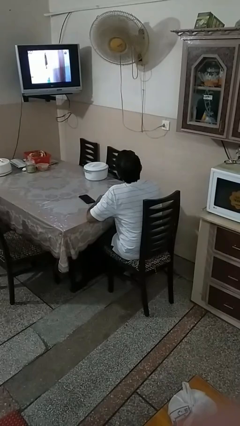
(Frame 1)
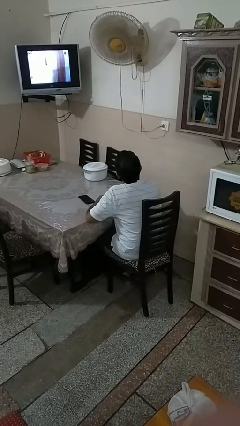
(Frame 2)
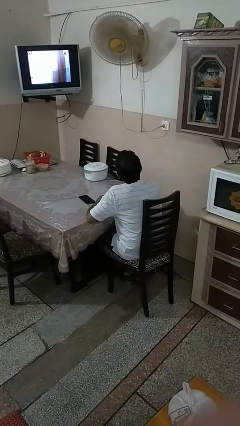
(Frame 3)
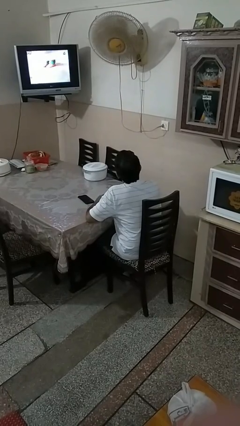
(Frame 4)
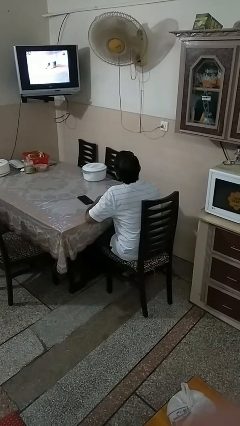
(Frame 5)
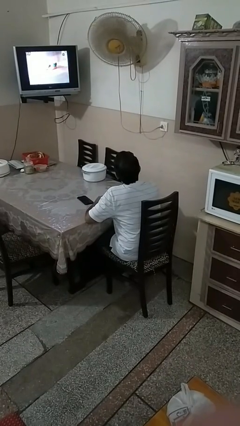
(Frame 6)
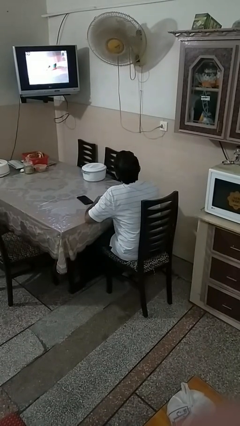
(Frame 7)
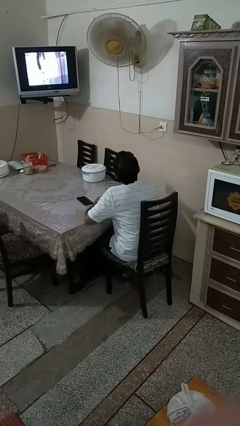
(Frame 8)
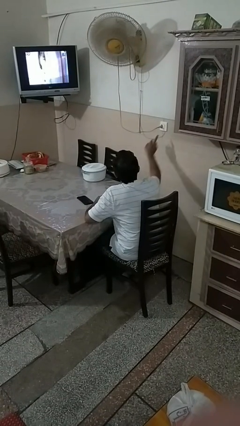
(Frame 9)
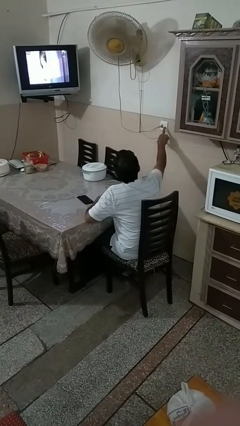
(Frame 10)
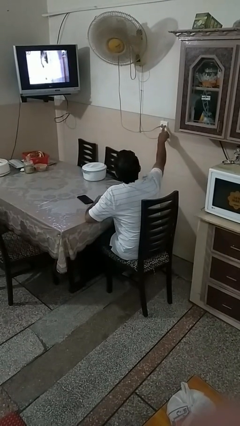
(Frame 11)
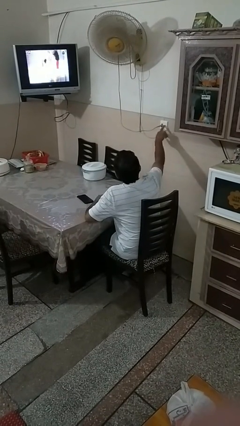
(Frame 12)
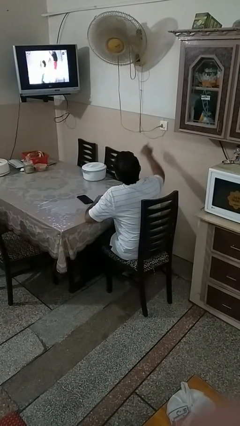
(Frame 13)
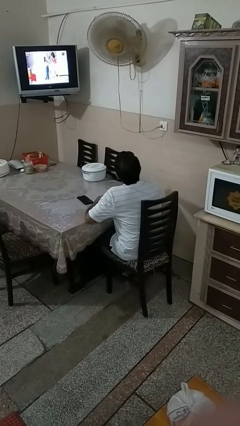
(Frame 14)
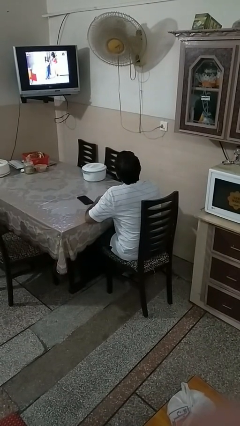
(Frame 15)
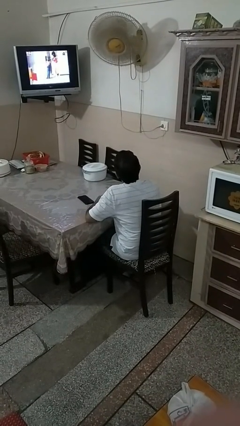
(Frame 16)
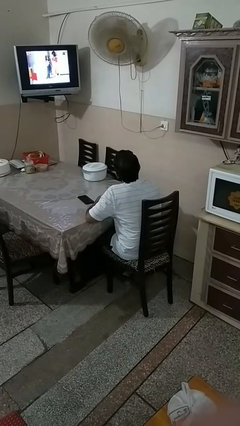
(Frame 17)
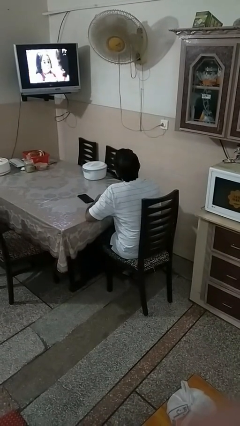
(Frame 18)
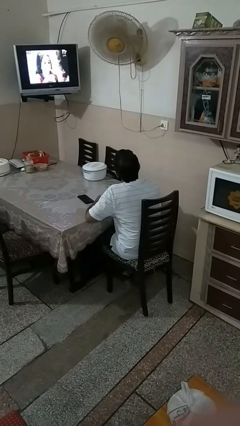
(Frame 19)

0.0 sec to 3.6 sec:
person turns off fan

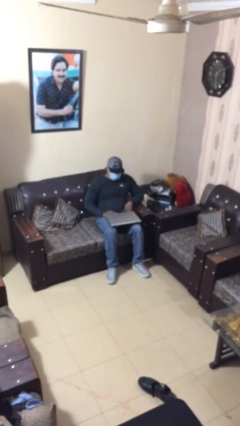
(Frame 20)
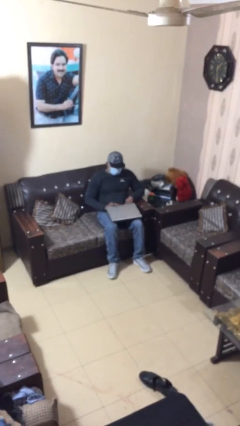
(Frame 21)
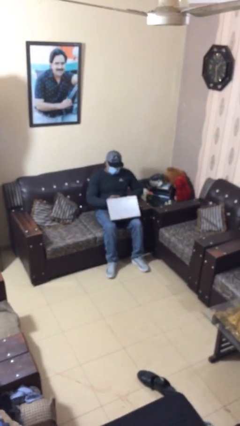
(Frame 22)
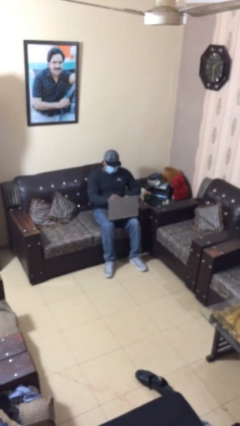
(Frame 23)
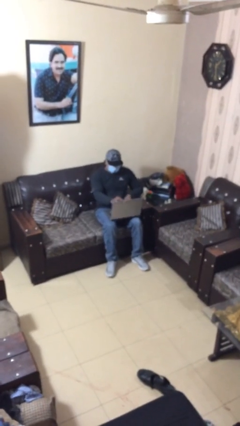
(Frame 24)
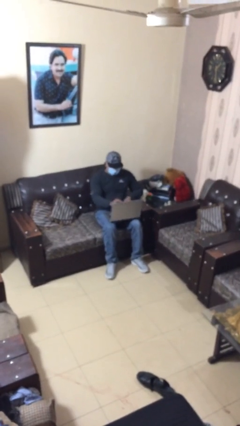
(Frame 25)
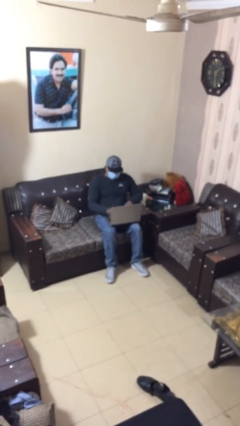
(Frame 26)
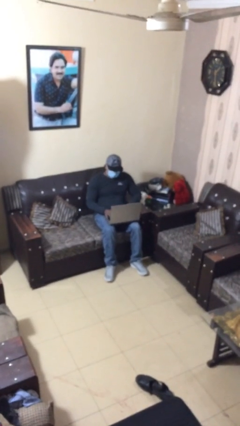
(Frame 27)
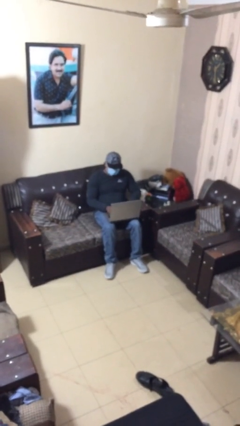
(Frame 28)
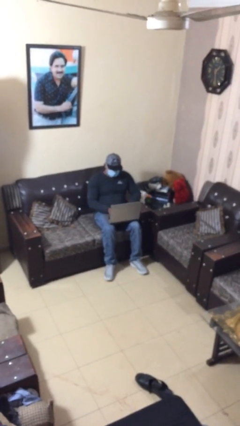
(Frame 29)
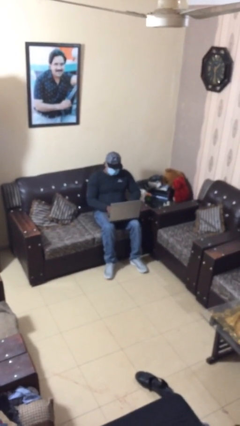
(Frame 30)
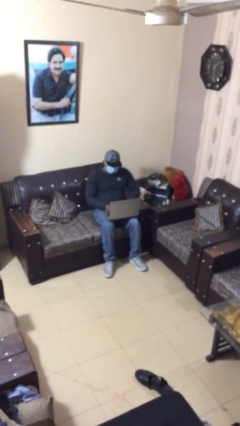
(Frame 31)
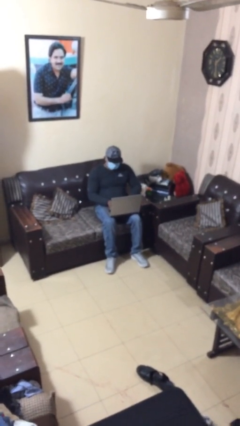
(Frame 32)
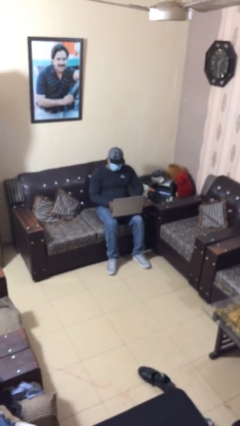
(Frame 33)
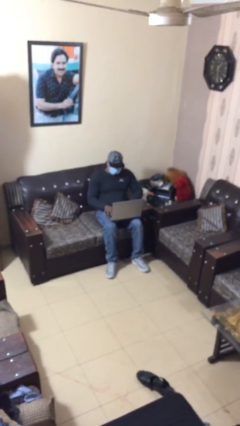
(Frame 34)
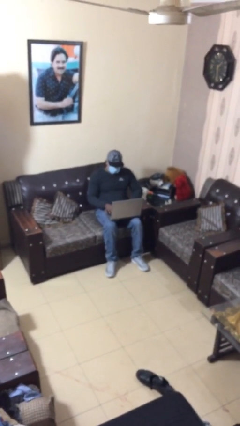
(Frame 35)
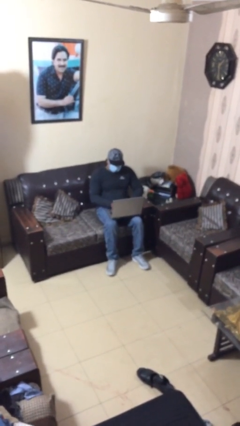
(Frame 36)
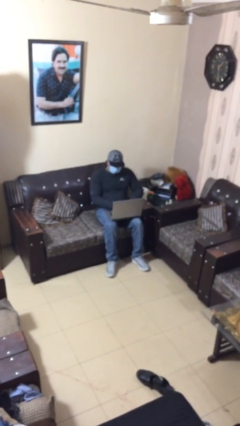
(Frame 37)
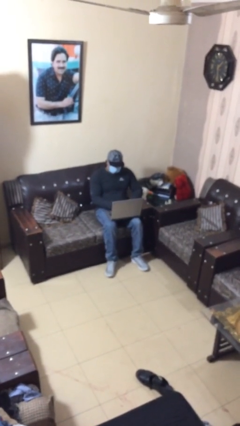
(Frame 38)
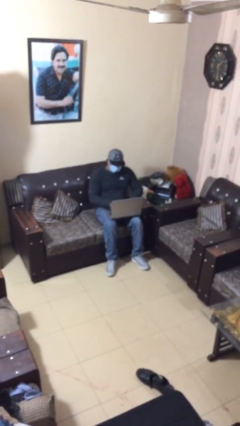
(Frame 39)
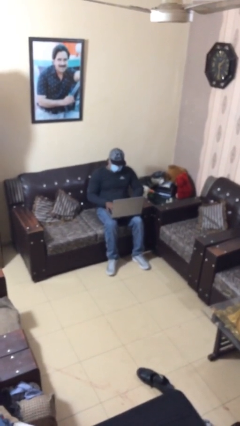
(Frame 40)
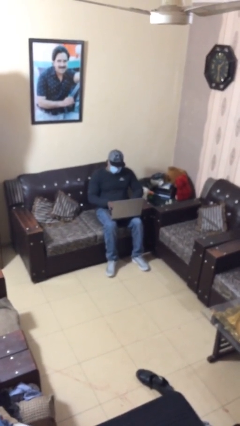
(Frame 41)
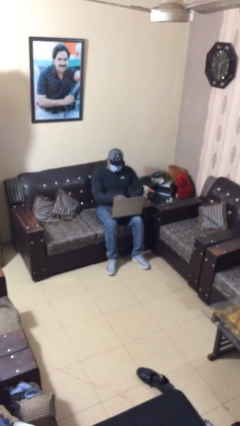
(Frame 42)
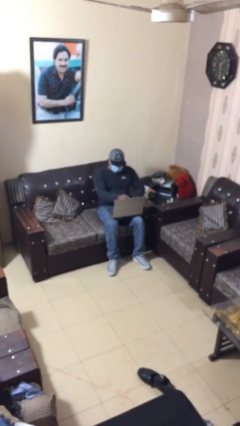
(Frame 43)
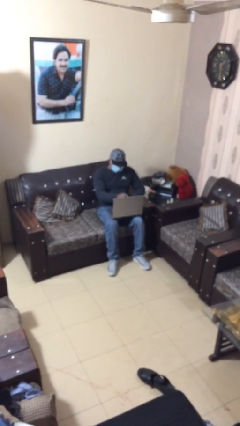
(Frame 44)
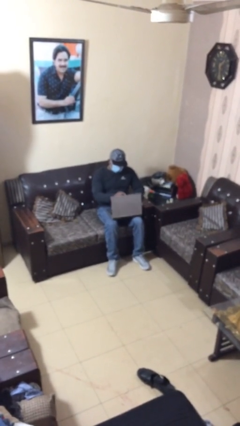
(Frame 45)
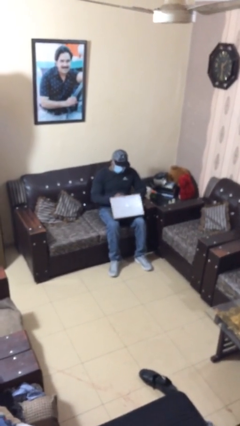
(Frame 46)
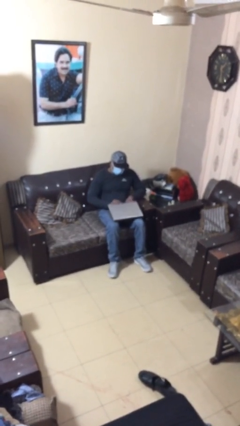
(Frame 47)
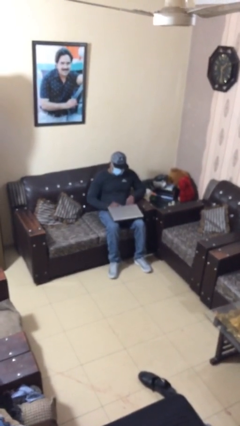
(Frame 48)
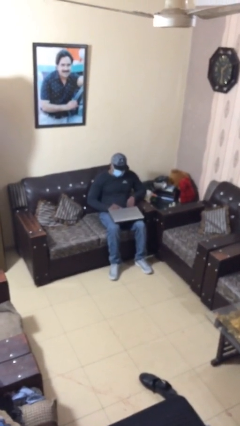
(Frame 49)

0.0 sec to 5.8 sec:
person interacts with laptop

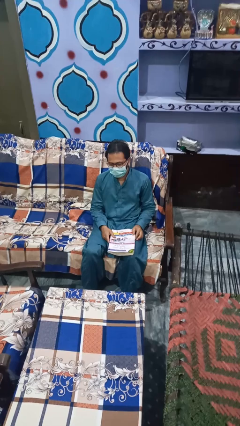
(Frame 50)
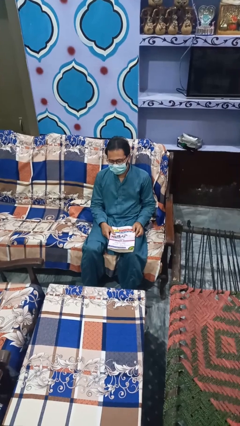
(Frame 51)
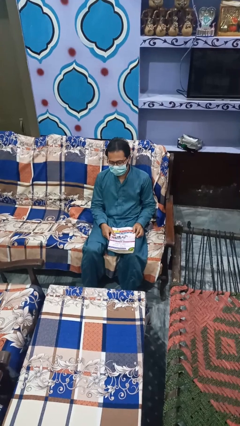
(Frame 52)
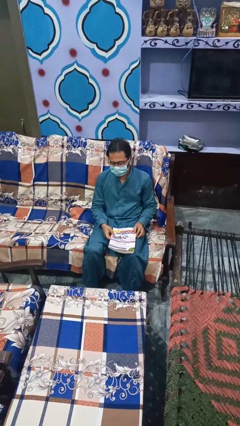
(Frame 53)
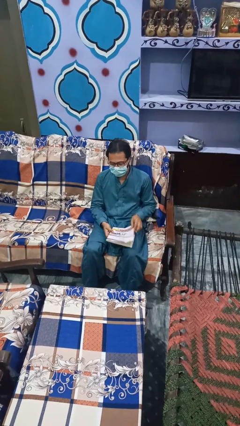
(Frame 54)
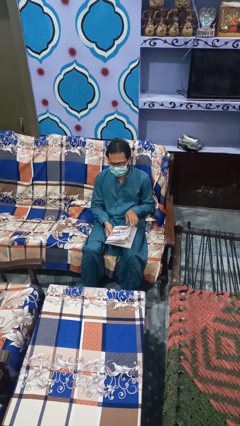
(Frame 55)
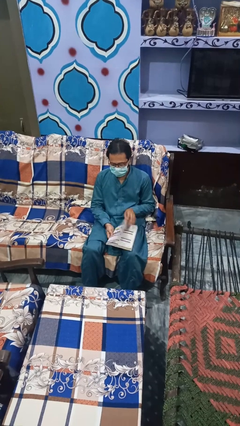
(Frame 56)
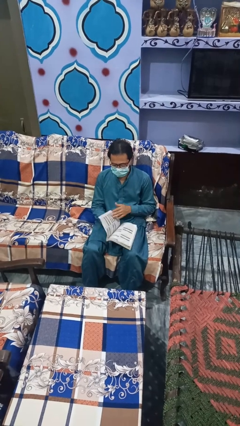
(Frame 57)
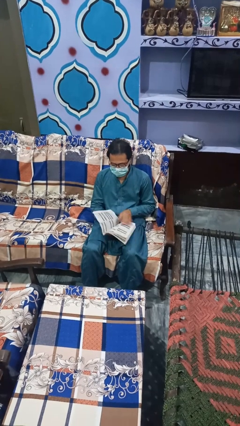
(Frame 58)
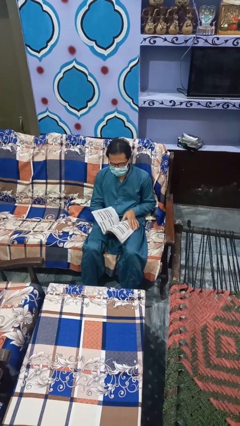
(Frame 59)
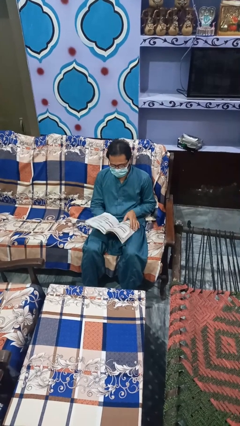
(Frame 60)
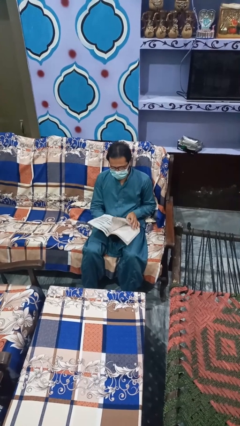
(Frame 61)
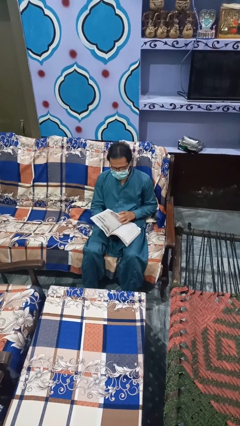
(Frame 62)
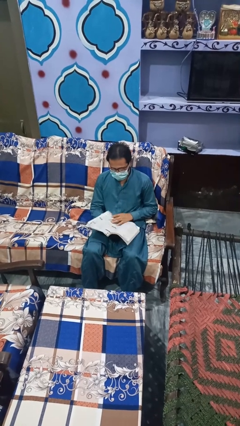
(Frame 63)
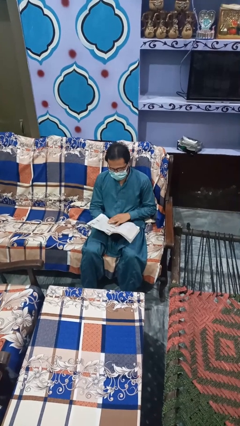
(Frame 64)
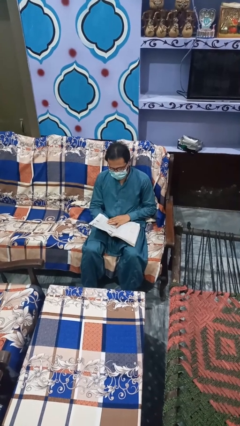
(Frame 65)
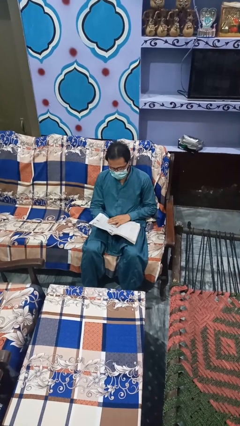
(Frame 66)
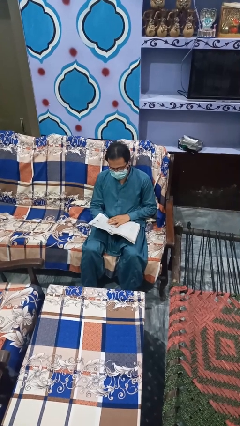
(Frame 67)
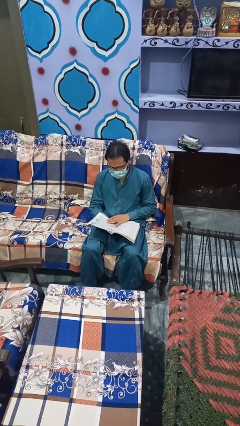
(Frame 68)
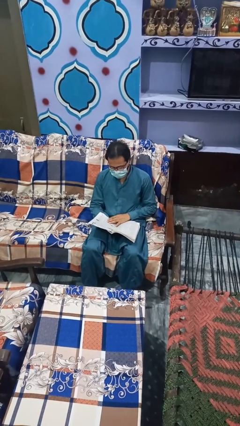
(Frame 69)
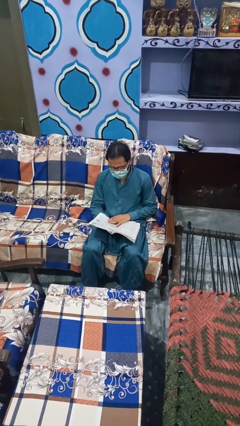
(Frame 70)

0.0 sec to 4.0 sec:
person reads magazine

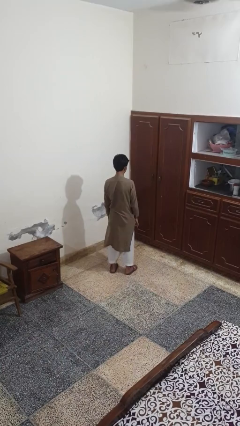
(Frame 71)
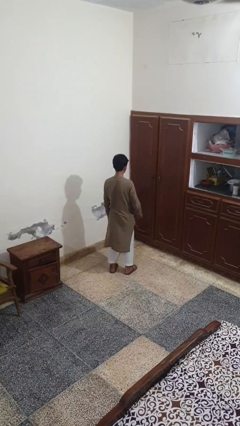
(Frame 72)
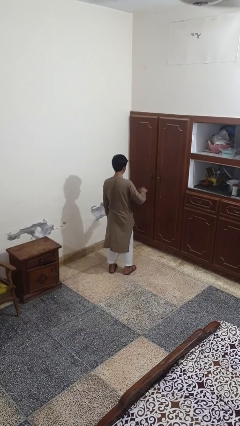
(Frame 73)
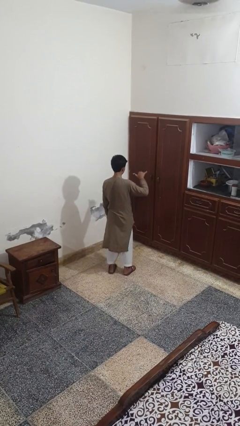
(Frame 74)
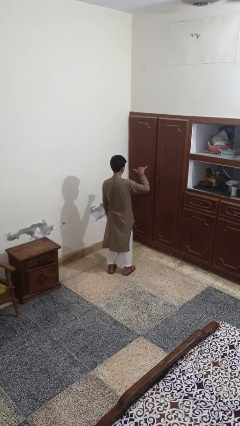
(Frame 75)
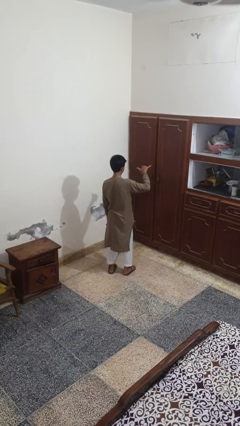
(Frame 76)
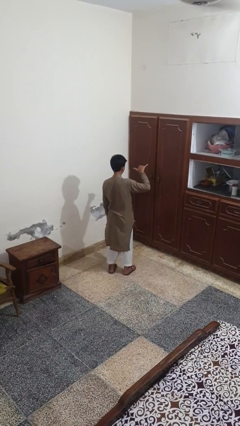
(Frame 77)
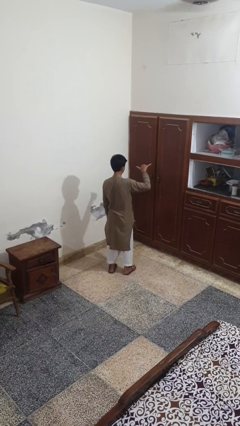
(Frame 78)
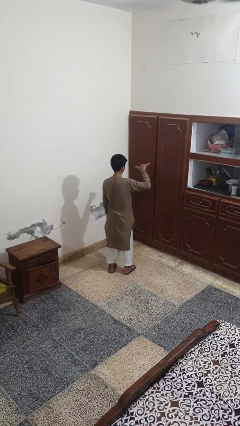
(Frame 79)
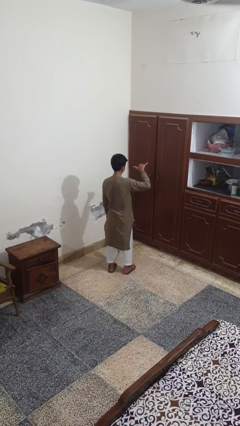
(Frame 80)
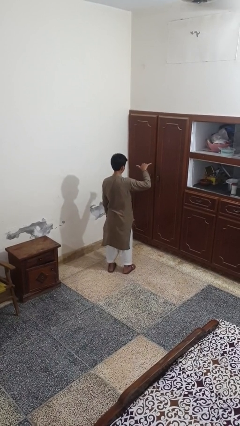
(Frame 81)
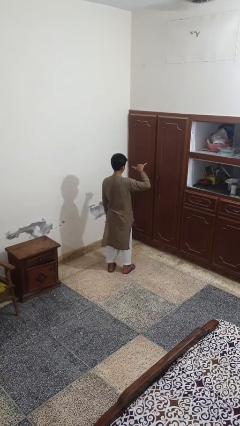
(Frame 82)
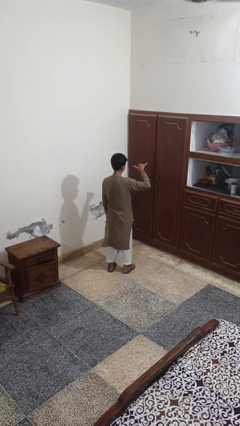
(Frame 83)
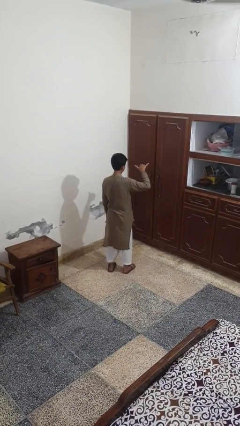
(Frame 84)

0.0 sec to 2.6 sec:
person gestures hang loose

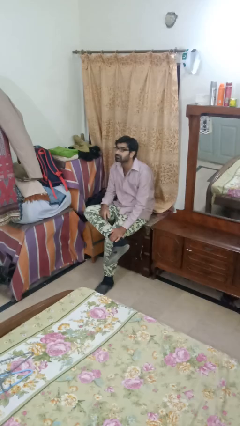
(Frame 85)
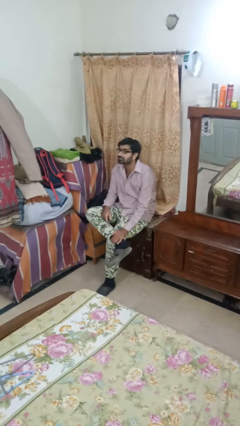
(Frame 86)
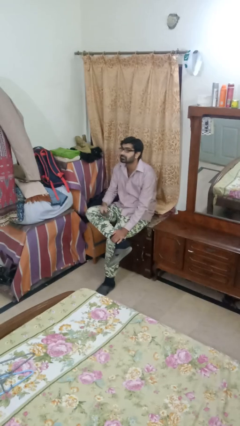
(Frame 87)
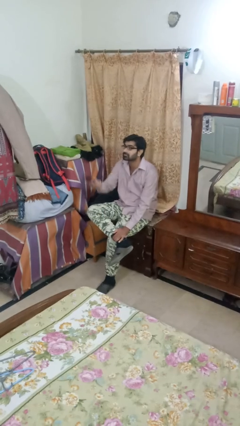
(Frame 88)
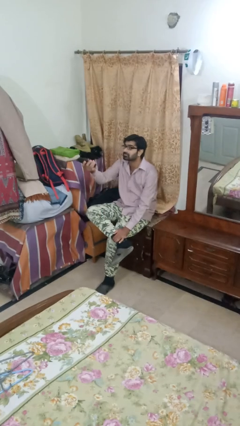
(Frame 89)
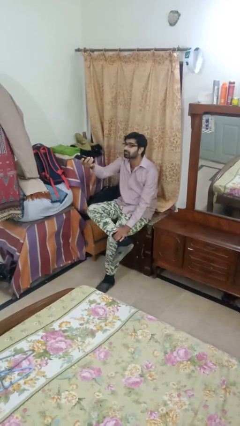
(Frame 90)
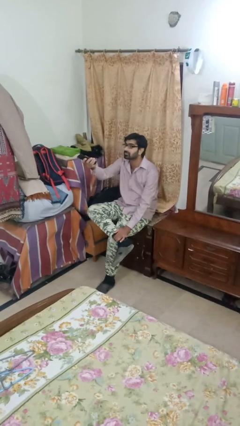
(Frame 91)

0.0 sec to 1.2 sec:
person uses television remote

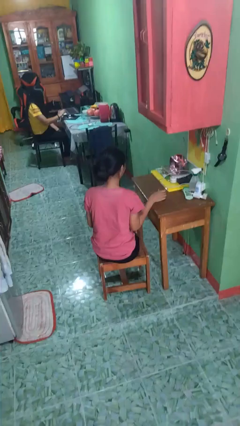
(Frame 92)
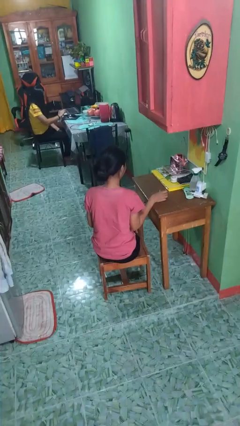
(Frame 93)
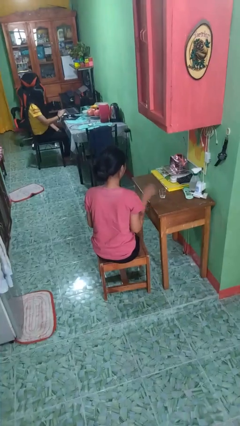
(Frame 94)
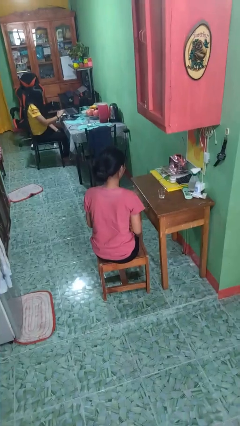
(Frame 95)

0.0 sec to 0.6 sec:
person puts down object on table
